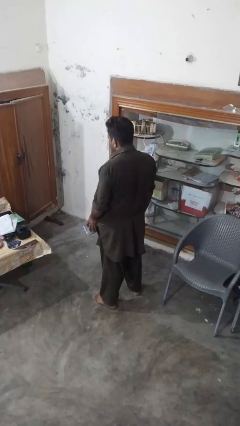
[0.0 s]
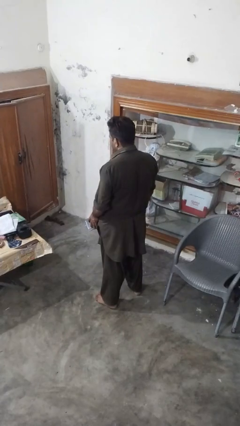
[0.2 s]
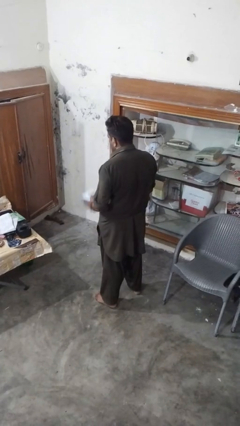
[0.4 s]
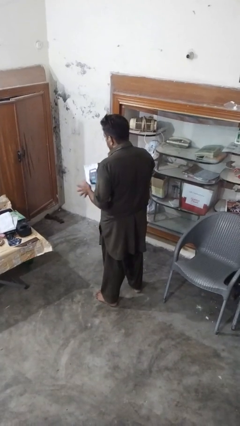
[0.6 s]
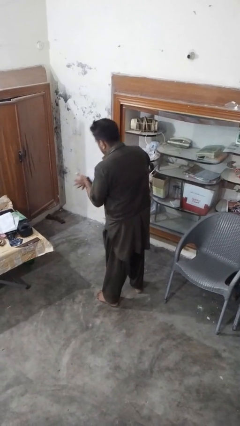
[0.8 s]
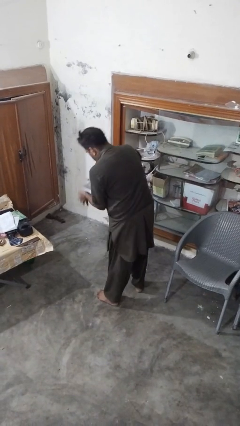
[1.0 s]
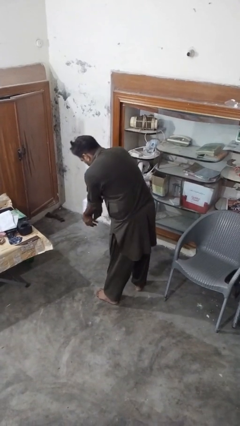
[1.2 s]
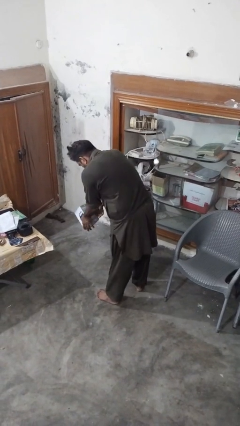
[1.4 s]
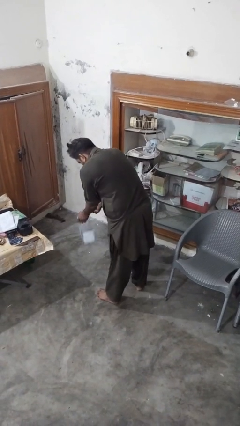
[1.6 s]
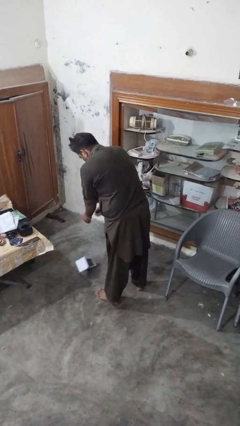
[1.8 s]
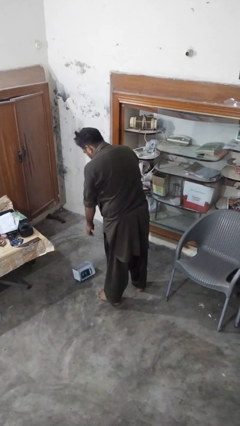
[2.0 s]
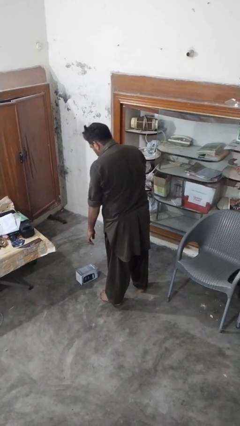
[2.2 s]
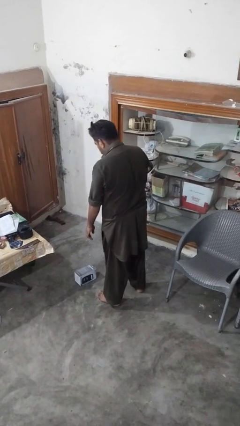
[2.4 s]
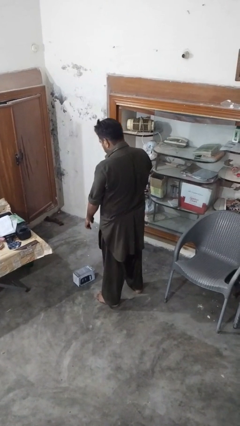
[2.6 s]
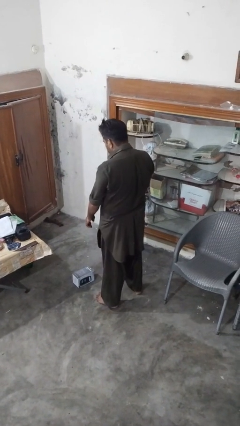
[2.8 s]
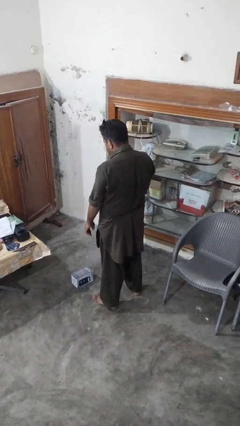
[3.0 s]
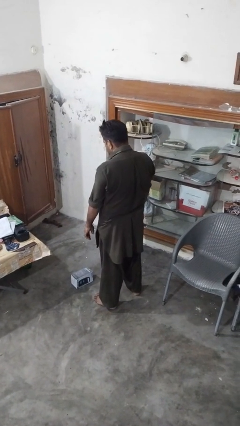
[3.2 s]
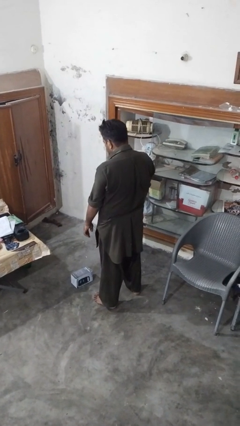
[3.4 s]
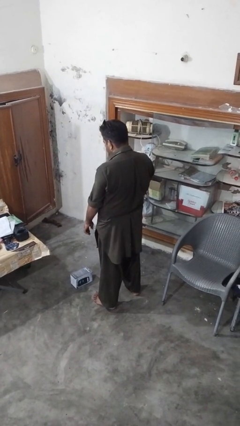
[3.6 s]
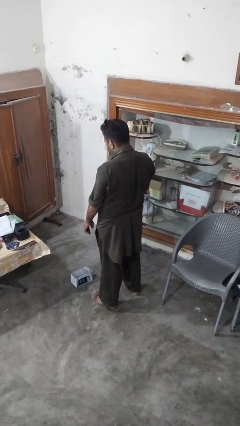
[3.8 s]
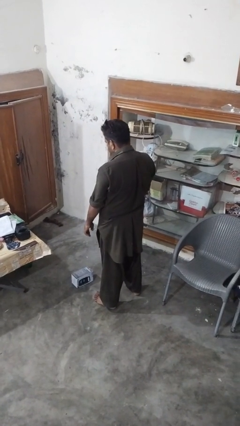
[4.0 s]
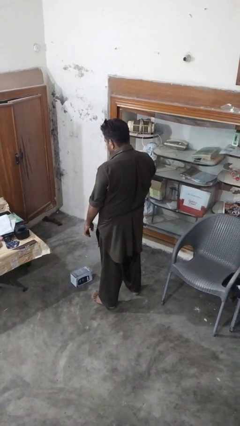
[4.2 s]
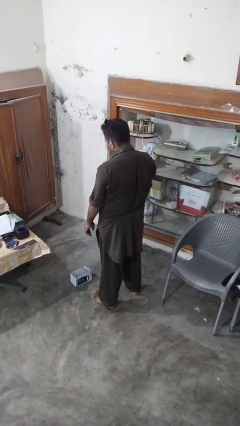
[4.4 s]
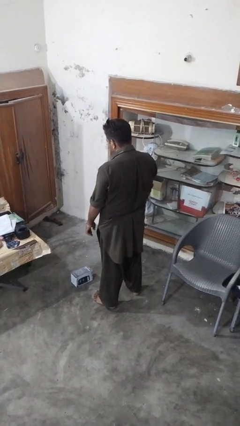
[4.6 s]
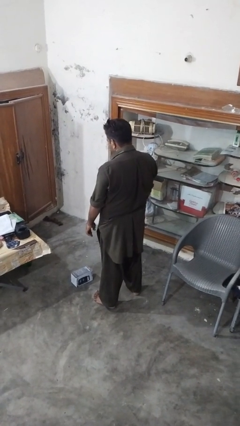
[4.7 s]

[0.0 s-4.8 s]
person drops object

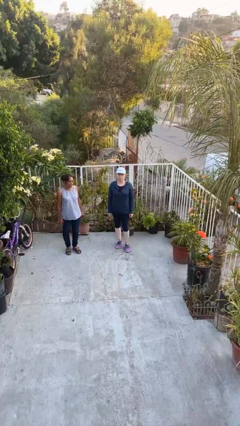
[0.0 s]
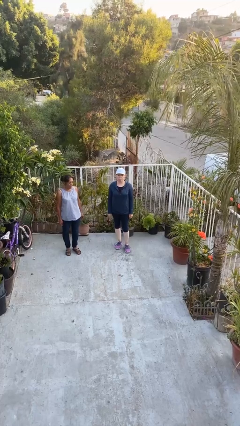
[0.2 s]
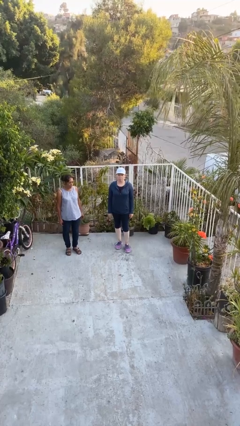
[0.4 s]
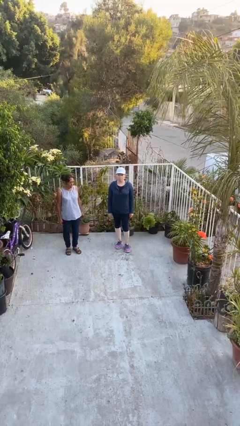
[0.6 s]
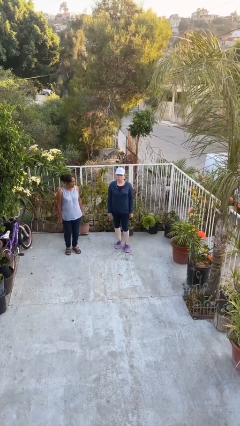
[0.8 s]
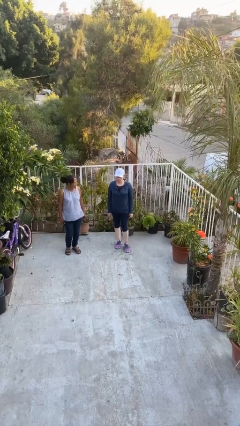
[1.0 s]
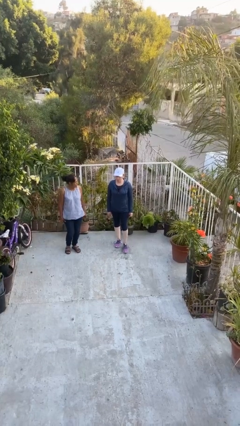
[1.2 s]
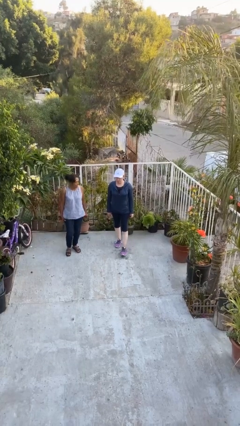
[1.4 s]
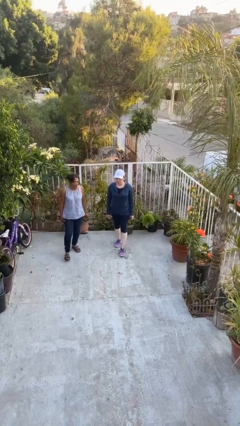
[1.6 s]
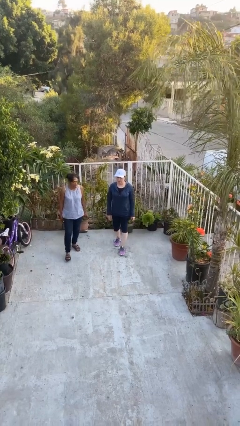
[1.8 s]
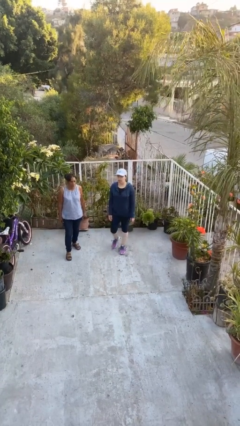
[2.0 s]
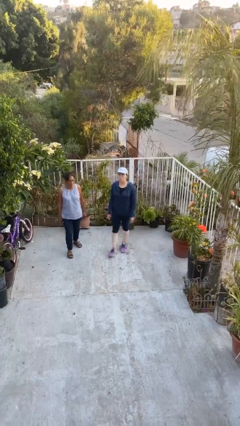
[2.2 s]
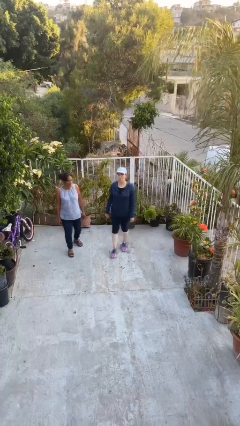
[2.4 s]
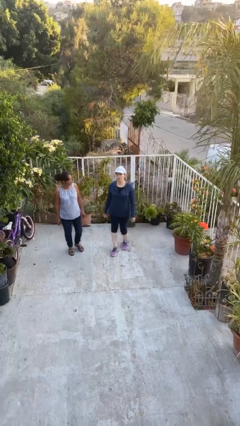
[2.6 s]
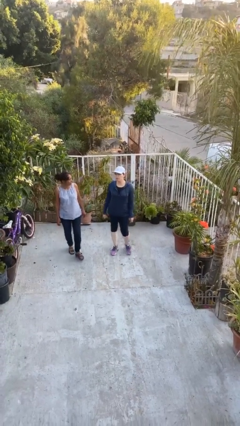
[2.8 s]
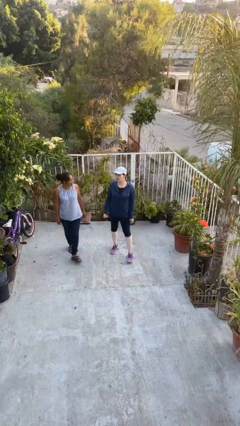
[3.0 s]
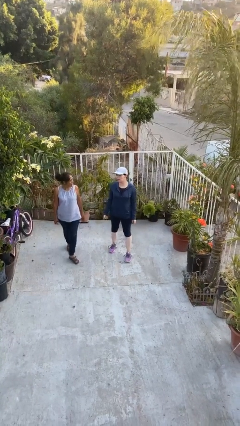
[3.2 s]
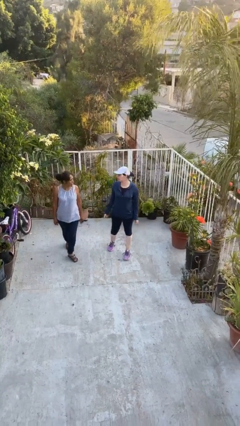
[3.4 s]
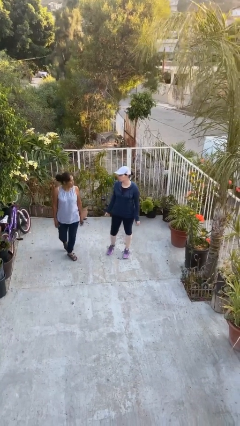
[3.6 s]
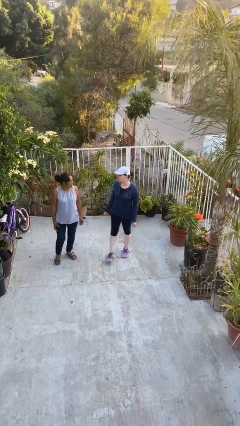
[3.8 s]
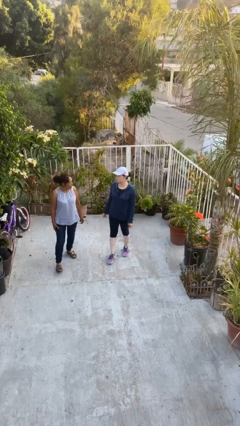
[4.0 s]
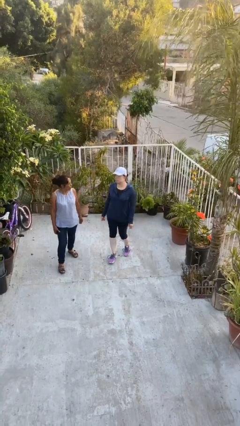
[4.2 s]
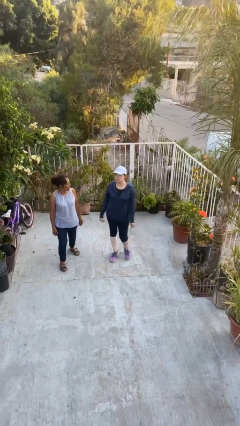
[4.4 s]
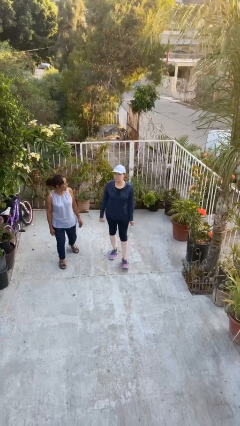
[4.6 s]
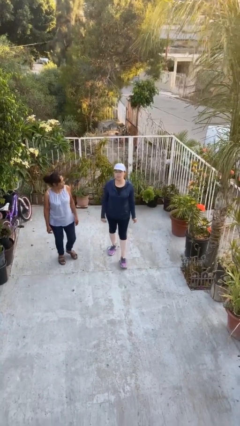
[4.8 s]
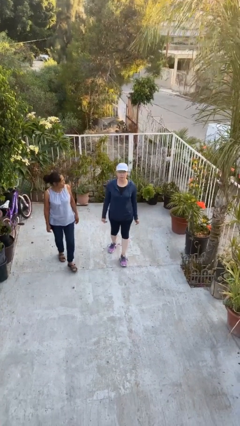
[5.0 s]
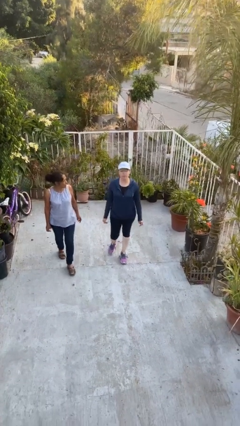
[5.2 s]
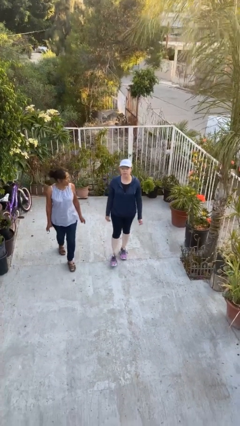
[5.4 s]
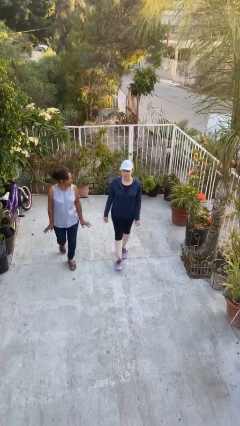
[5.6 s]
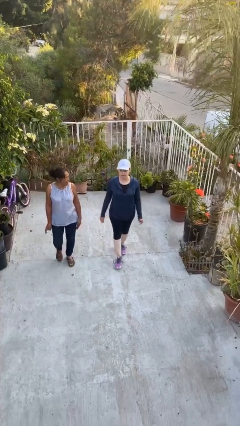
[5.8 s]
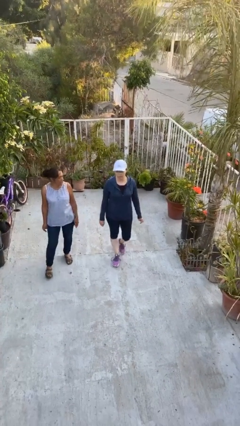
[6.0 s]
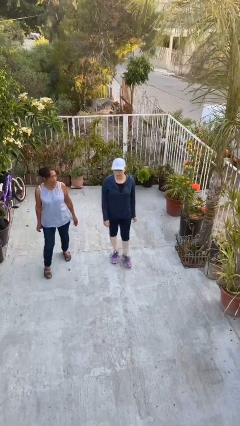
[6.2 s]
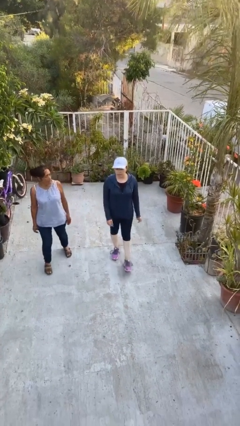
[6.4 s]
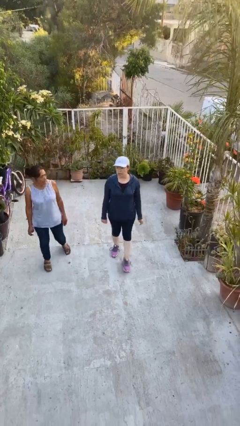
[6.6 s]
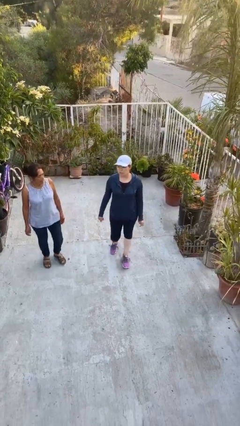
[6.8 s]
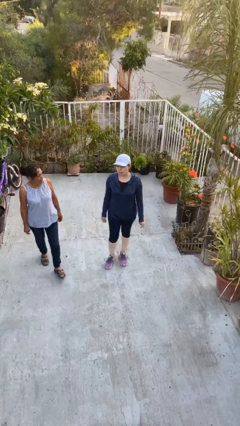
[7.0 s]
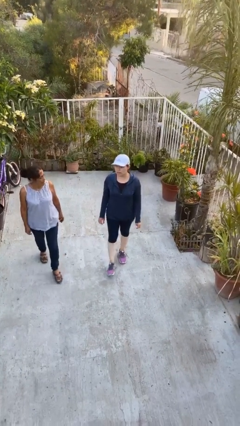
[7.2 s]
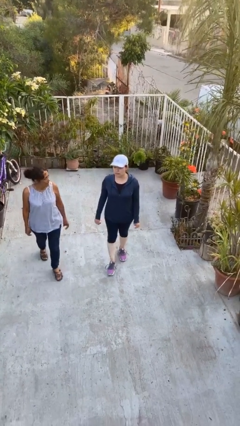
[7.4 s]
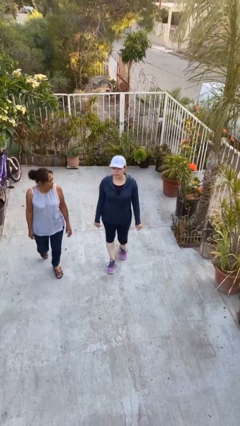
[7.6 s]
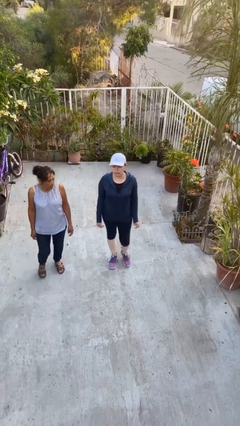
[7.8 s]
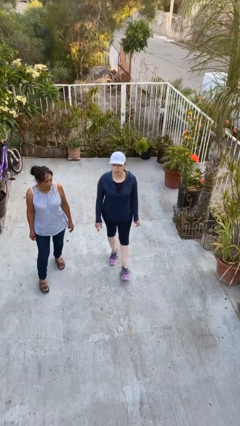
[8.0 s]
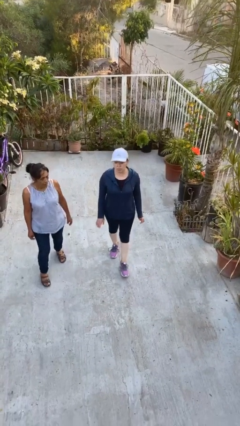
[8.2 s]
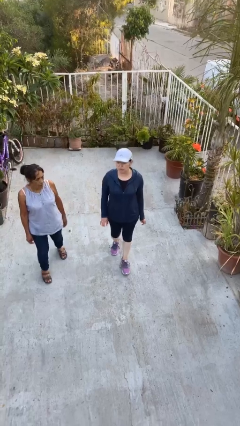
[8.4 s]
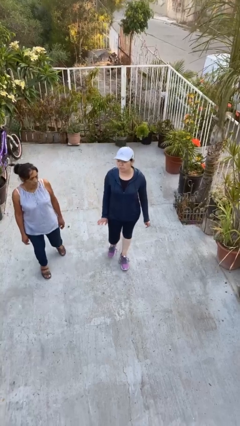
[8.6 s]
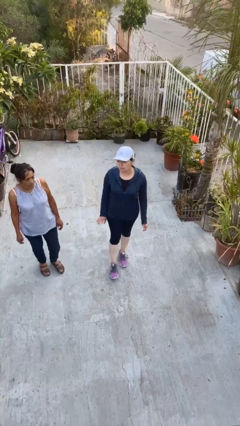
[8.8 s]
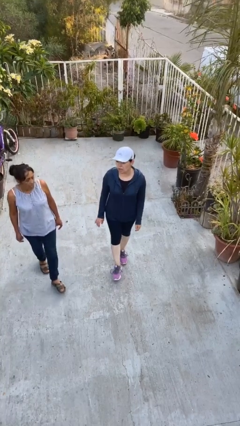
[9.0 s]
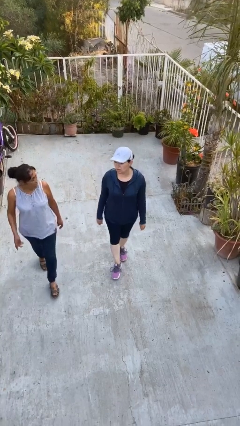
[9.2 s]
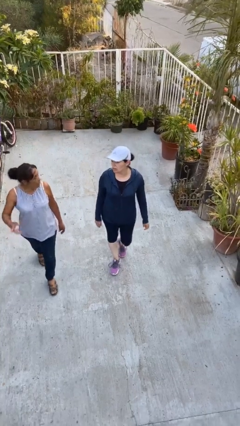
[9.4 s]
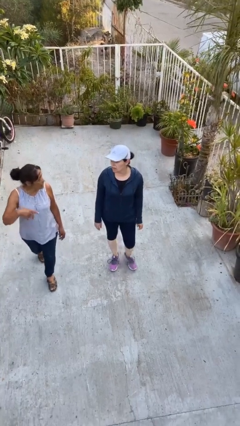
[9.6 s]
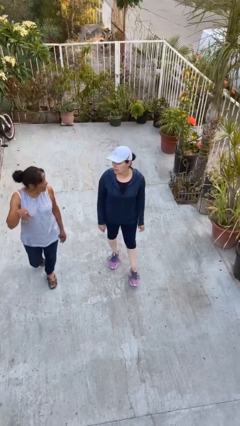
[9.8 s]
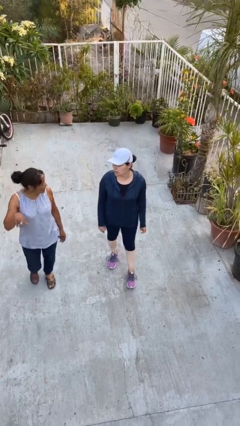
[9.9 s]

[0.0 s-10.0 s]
person talks to person

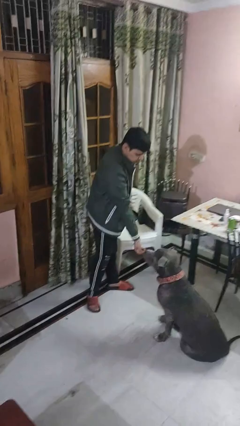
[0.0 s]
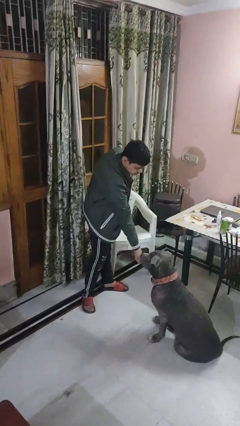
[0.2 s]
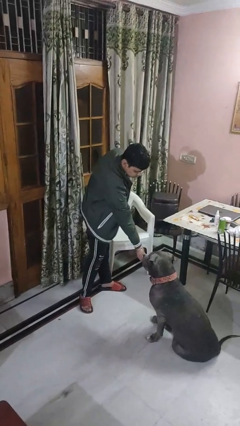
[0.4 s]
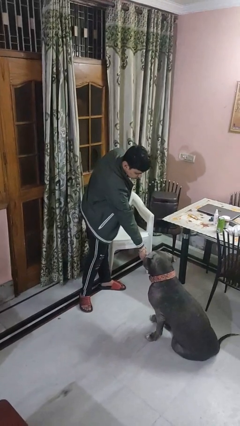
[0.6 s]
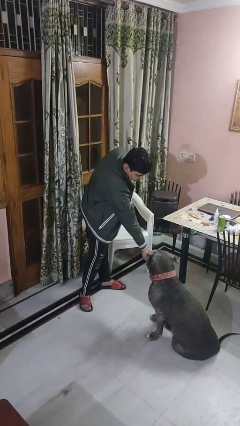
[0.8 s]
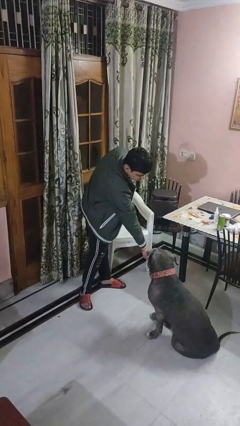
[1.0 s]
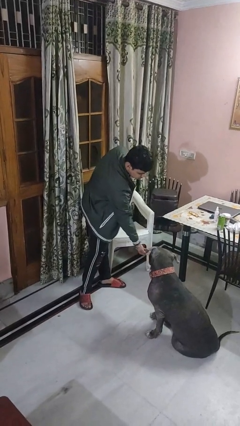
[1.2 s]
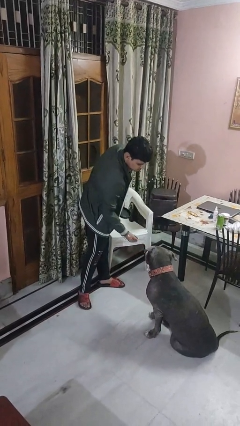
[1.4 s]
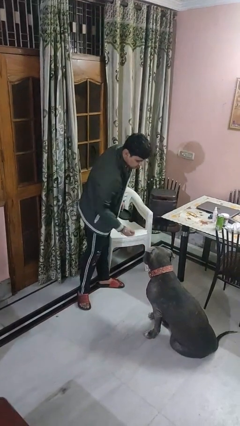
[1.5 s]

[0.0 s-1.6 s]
person feeds dog

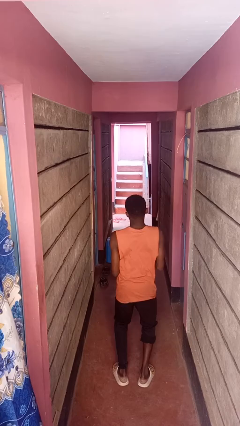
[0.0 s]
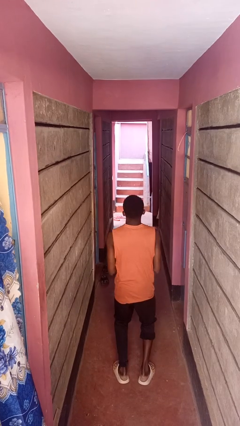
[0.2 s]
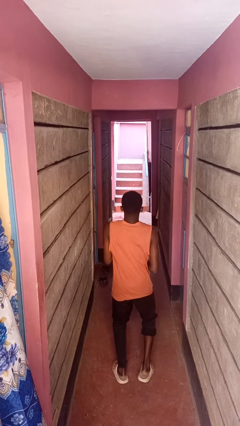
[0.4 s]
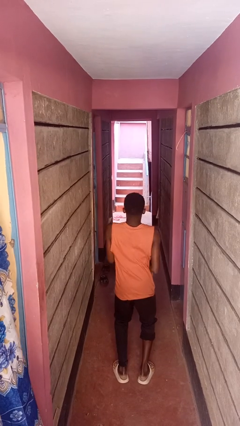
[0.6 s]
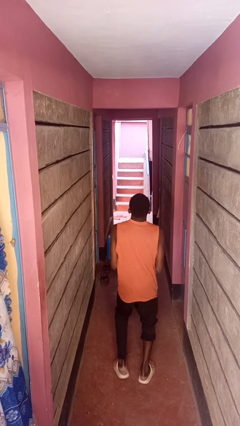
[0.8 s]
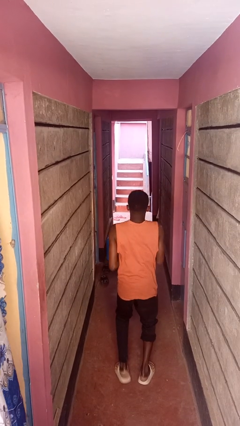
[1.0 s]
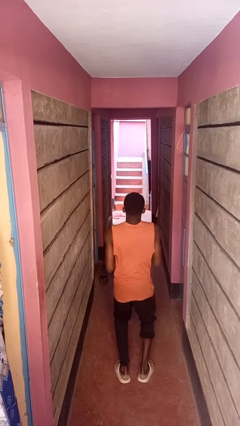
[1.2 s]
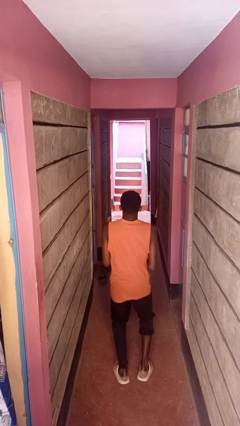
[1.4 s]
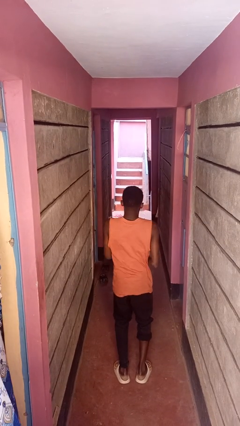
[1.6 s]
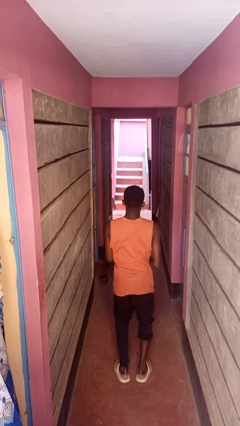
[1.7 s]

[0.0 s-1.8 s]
person dances in place
